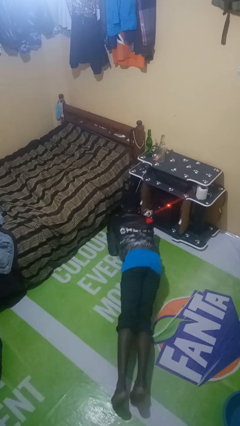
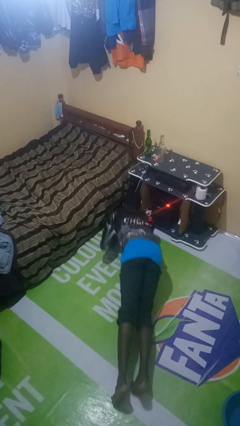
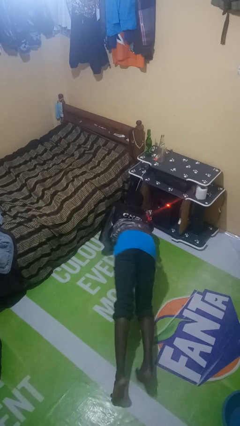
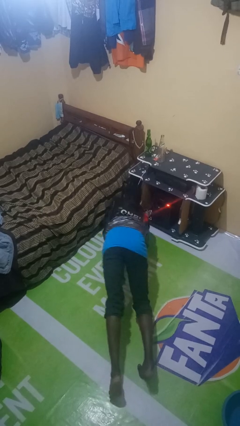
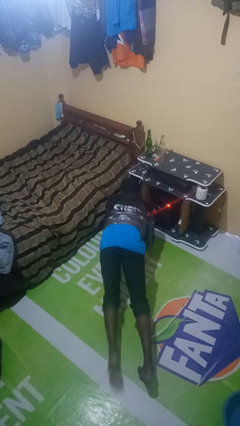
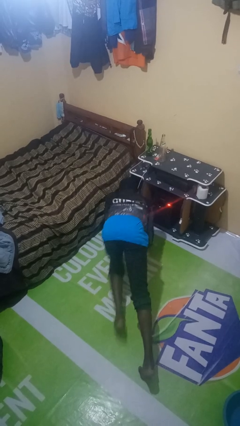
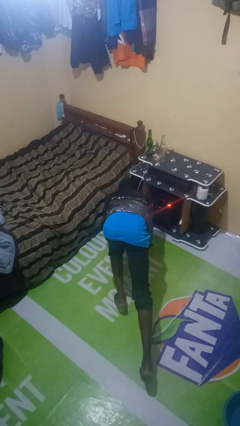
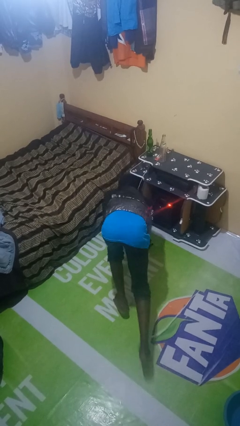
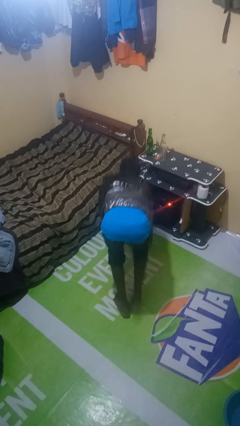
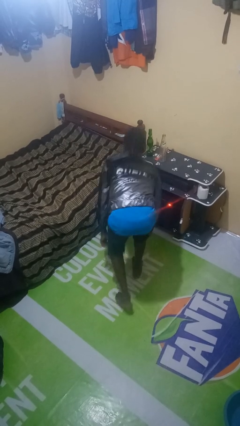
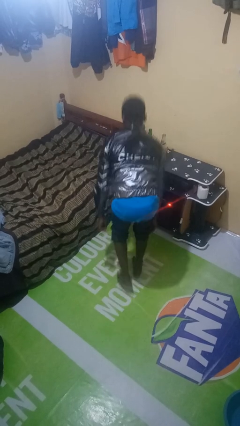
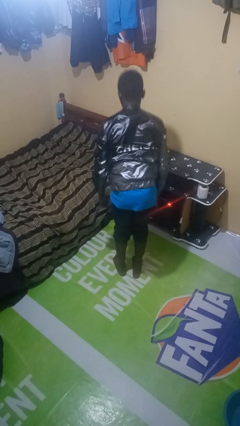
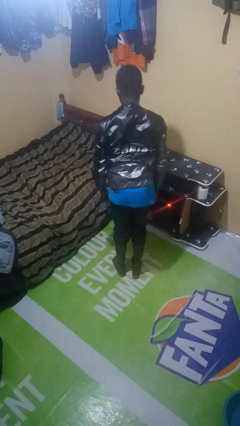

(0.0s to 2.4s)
person stands up from floor

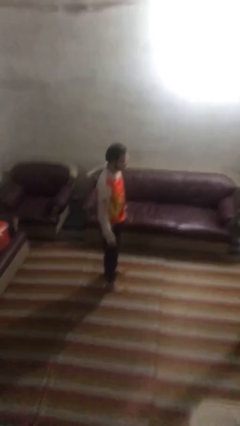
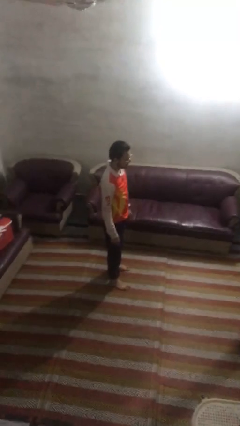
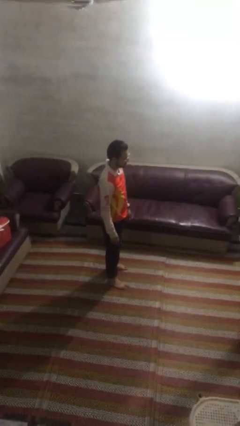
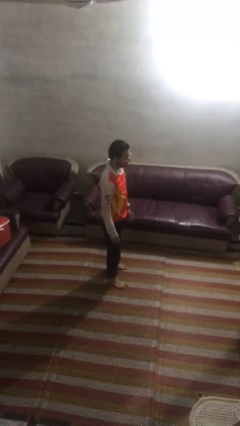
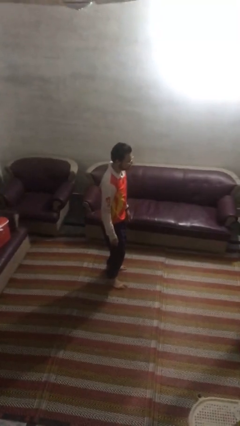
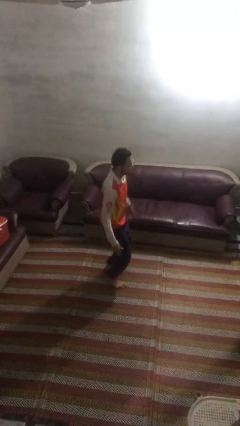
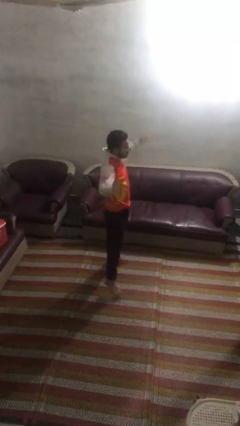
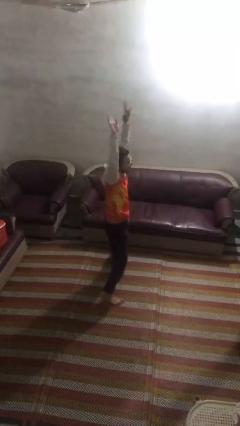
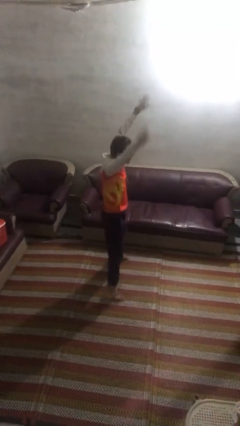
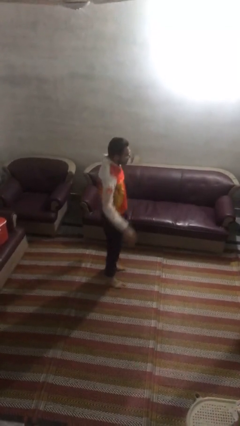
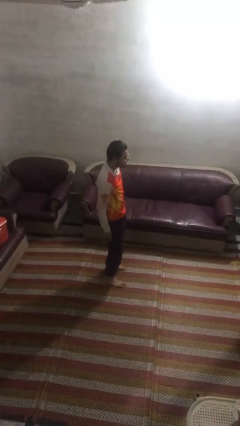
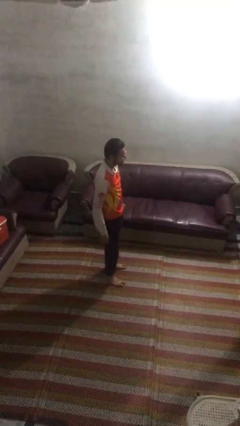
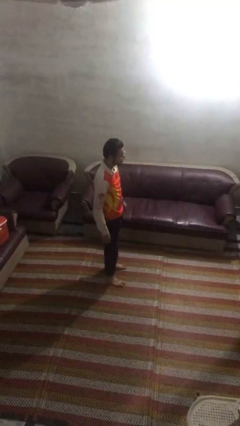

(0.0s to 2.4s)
person exercises with jumping jacks

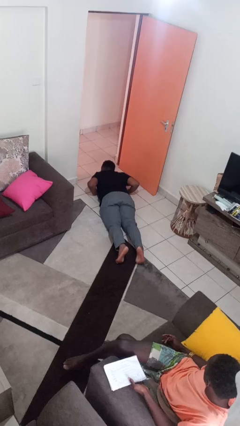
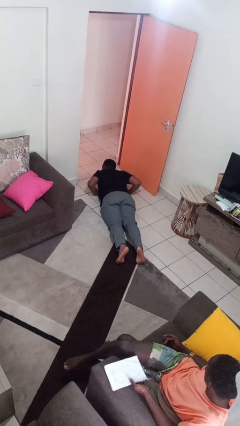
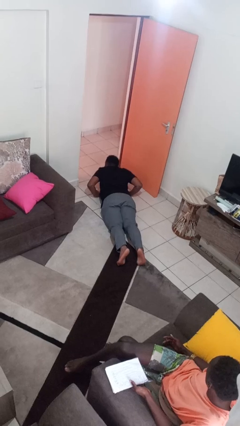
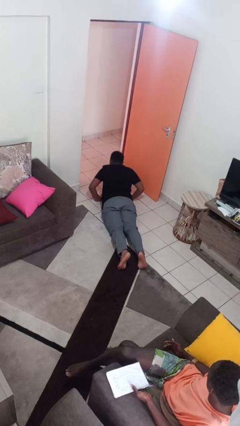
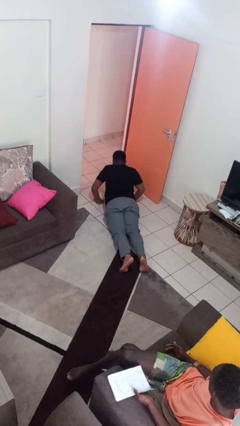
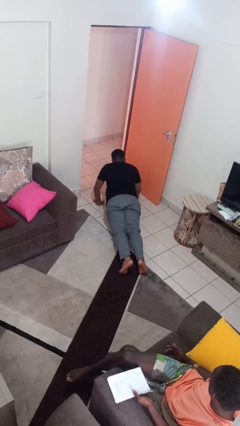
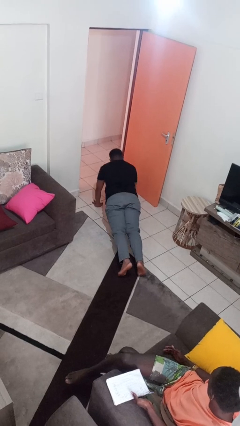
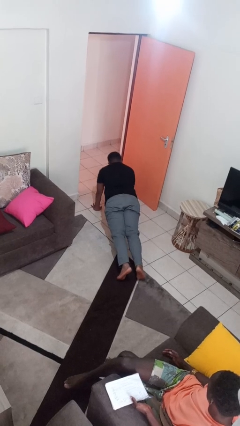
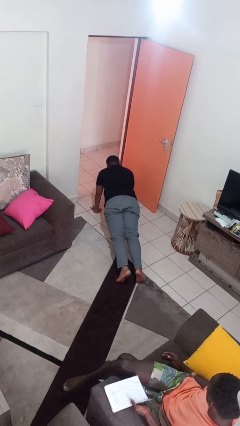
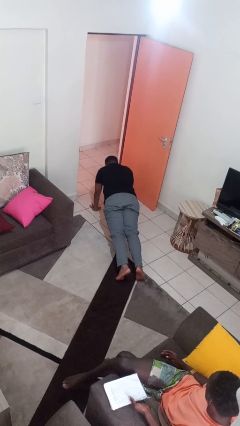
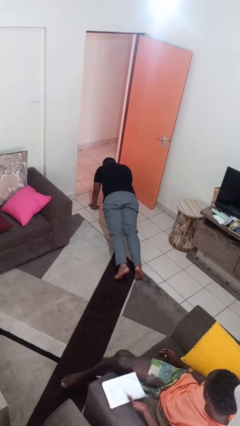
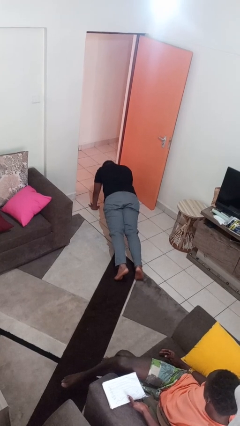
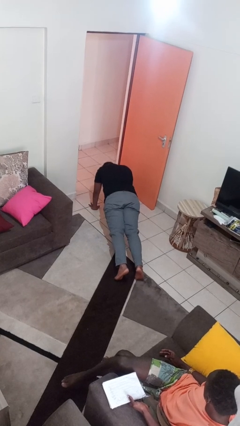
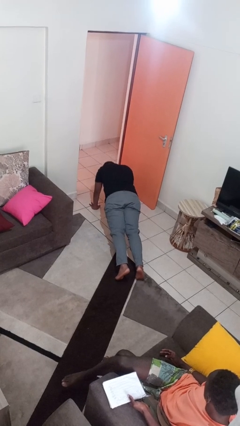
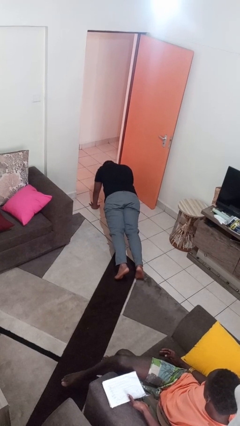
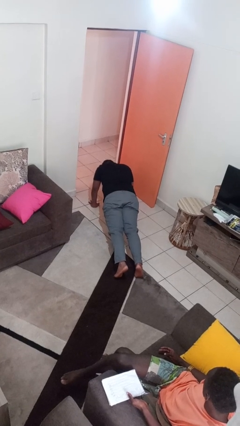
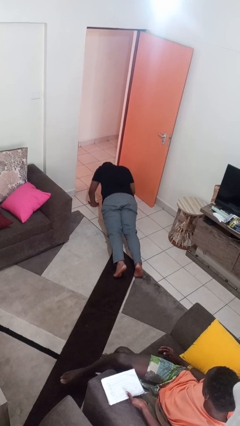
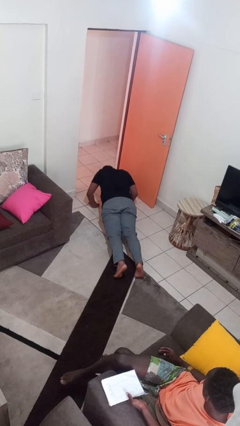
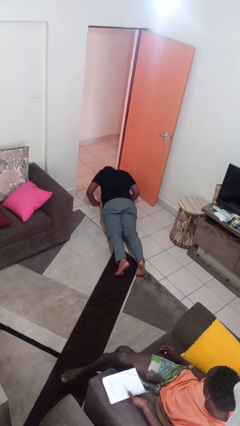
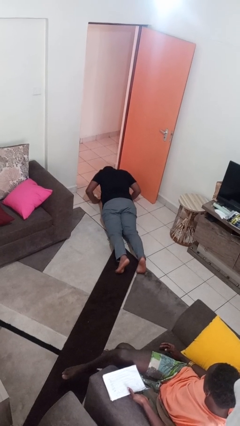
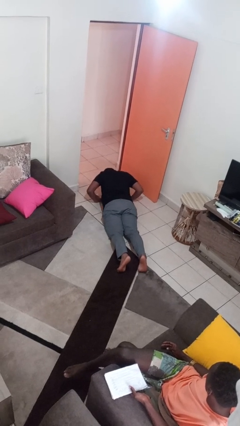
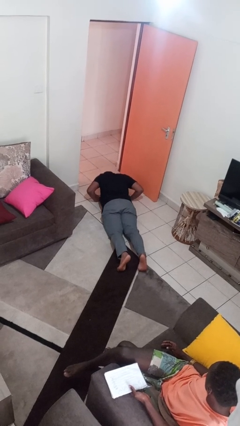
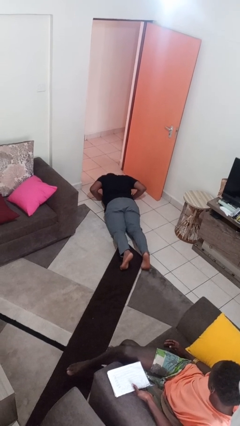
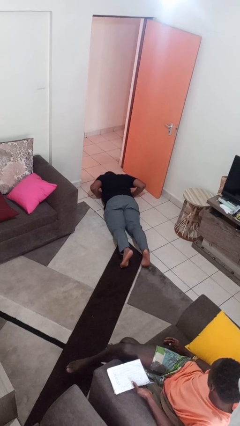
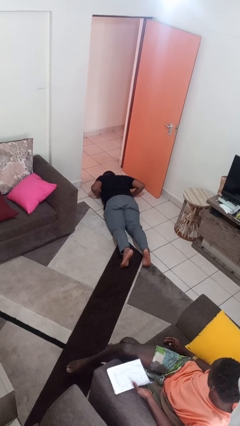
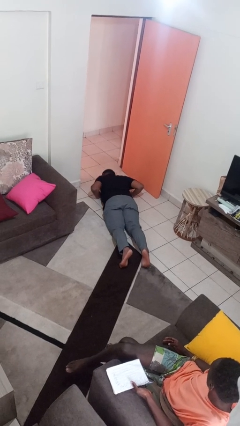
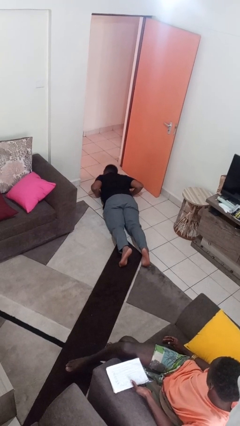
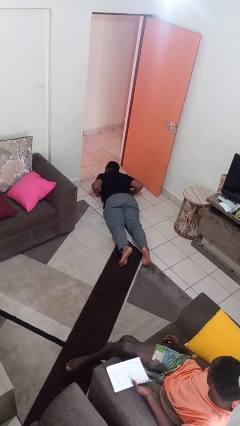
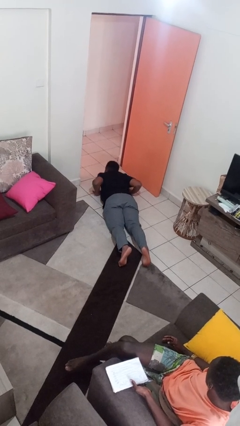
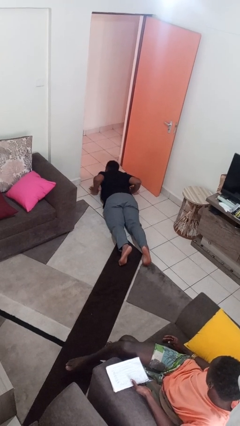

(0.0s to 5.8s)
person exercises with pushup

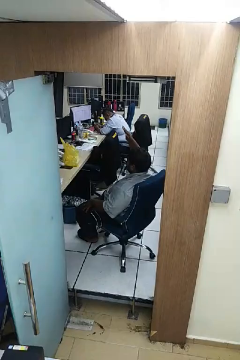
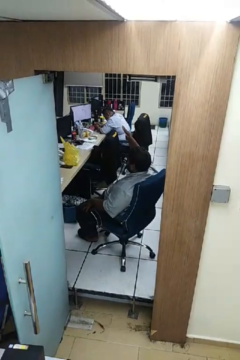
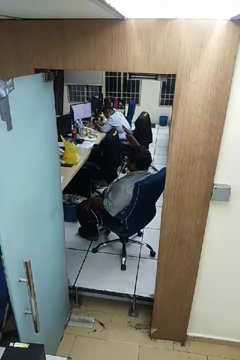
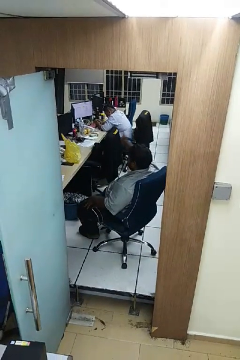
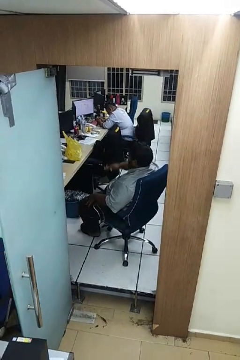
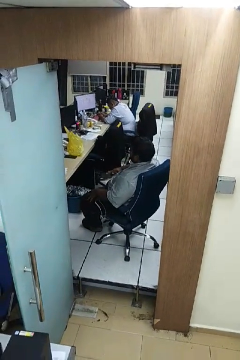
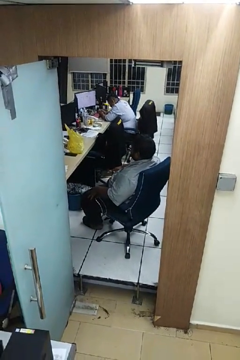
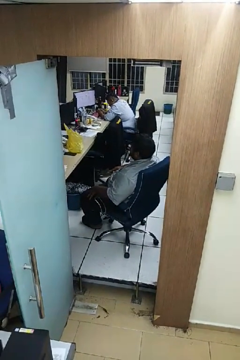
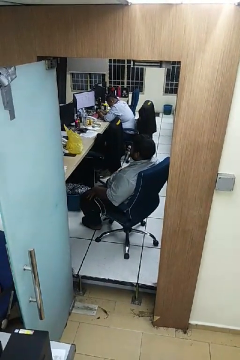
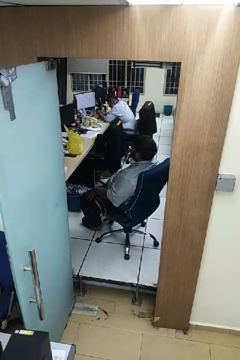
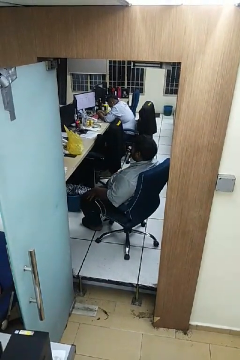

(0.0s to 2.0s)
person gestures swipe down

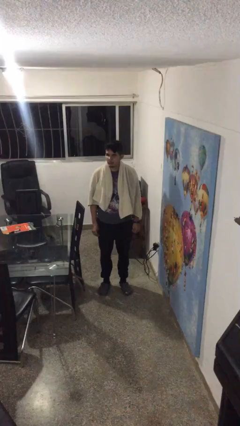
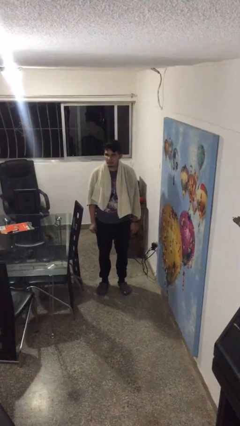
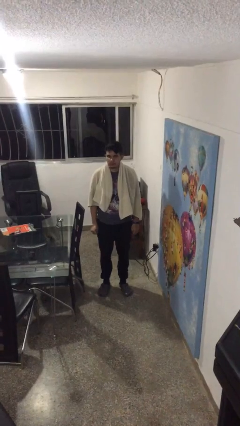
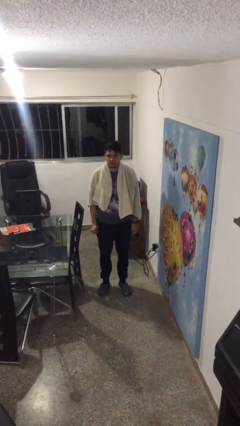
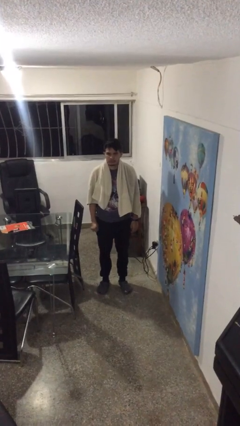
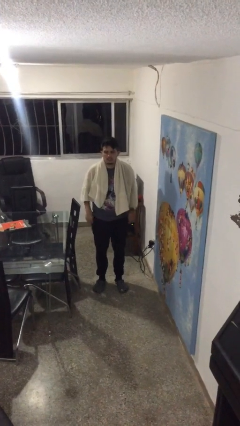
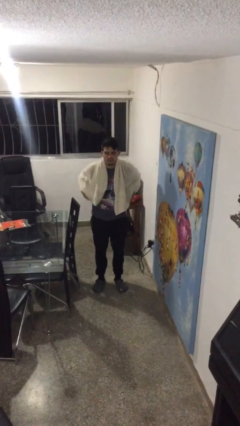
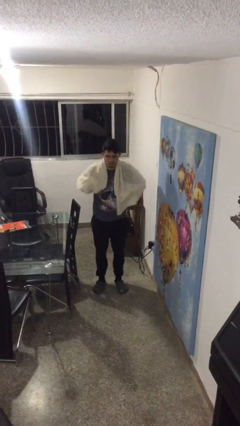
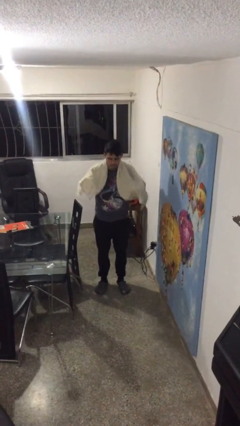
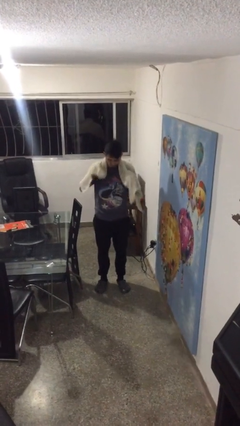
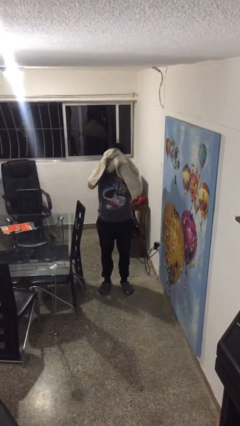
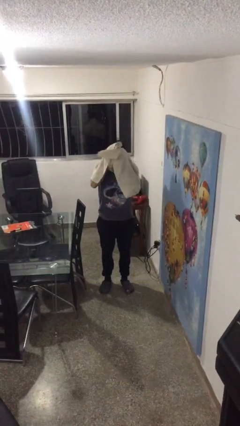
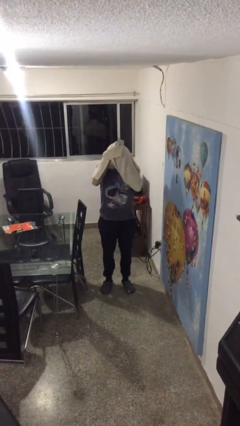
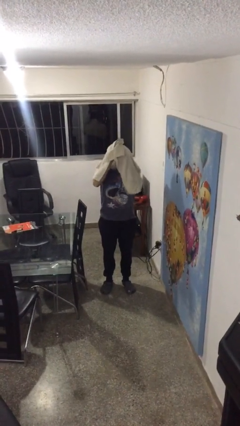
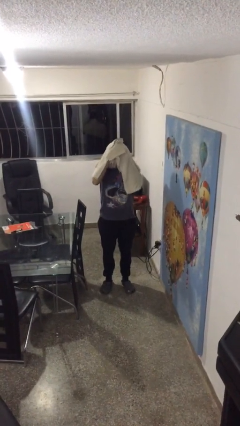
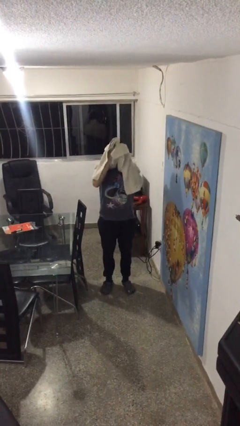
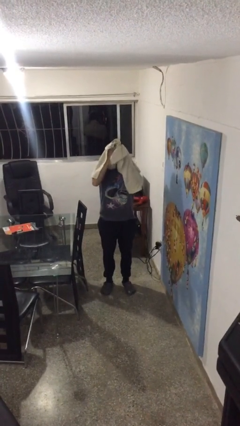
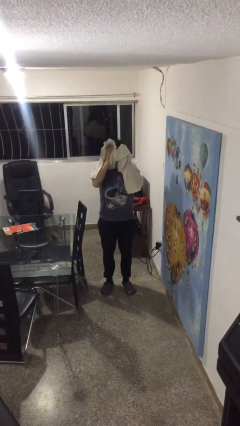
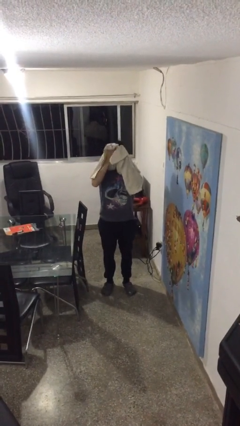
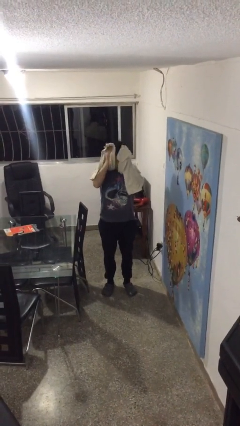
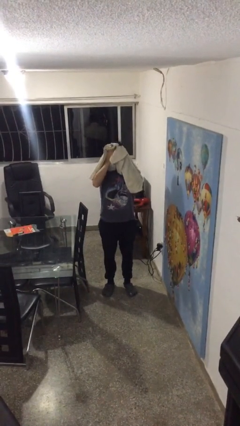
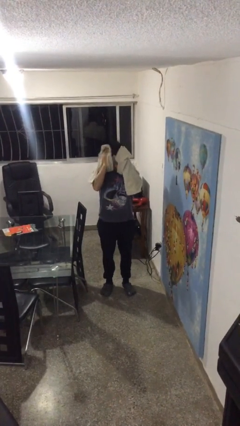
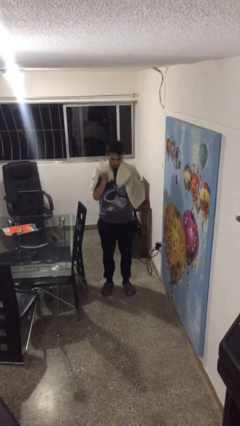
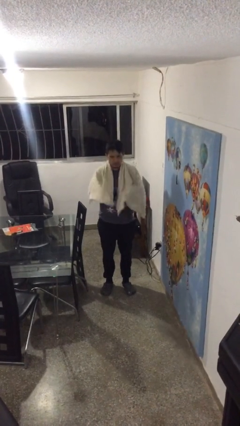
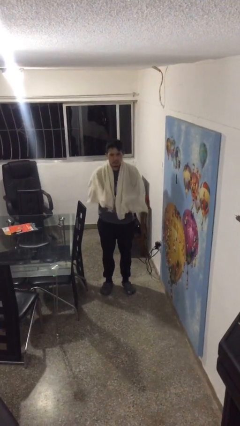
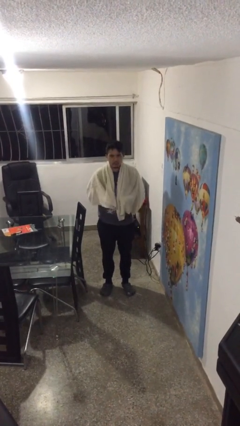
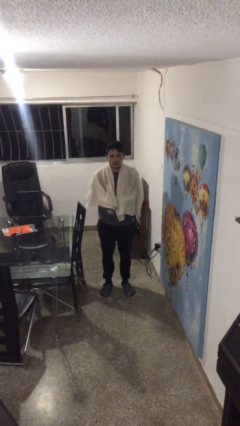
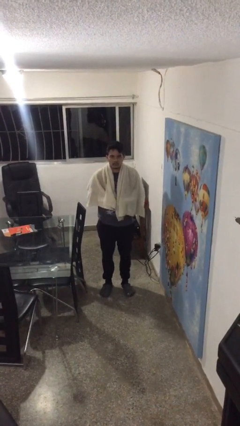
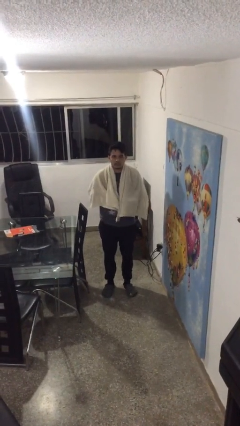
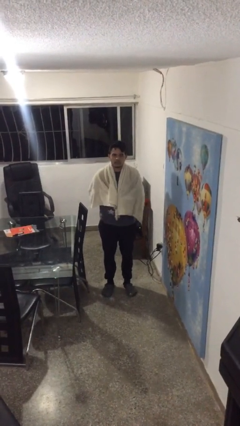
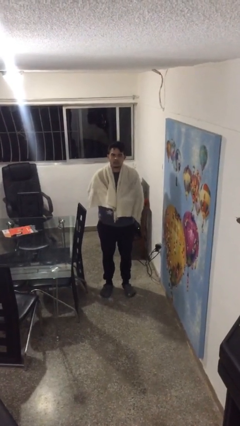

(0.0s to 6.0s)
person dries hair with towel
